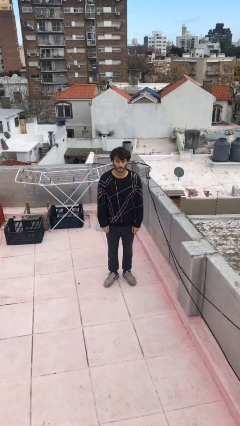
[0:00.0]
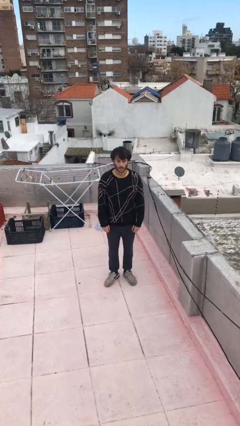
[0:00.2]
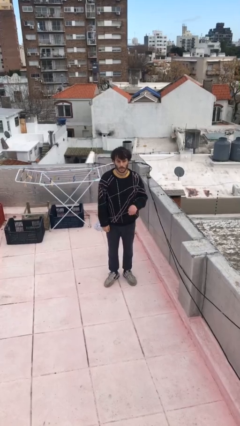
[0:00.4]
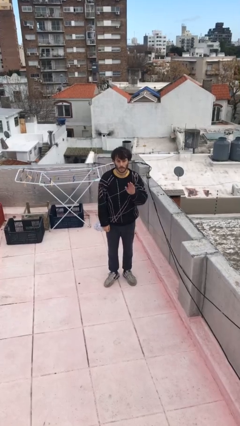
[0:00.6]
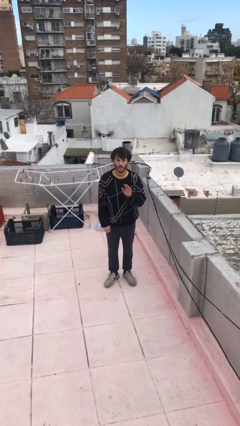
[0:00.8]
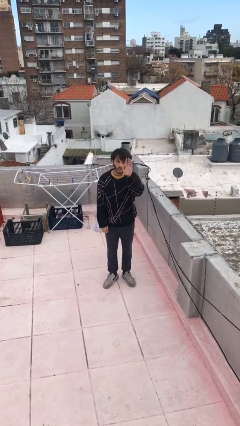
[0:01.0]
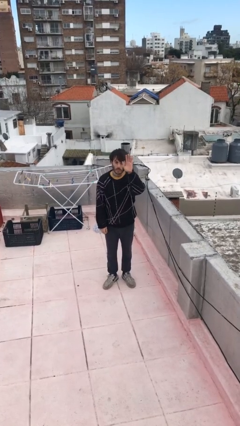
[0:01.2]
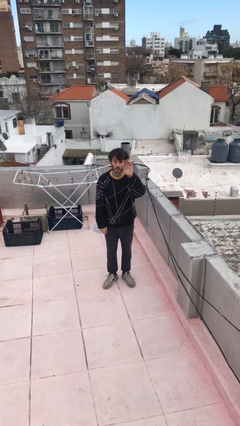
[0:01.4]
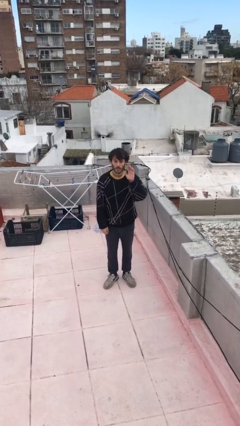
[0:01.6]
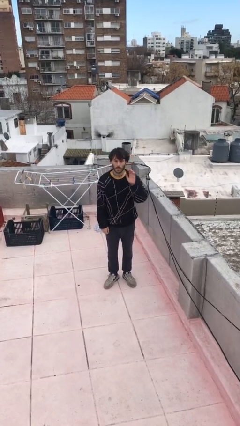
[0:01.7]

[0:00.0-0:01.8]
person gestures swipe up

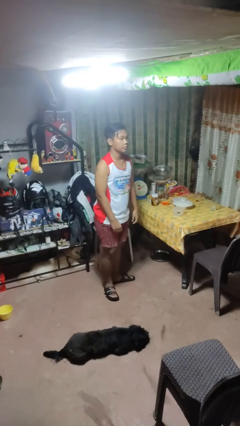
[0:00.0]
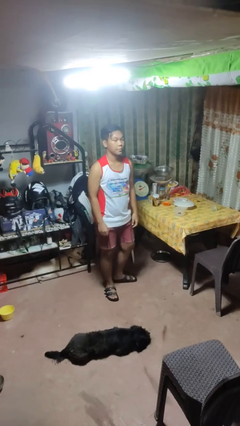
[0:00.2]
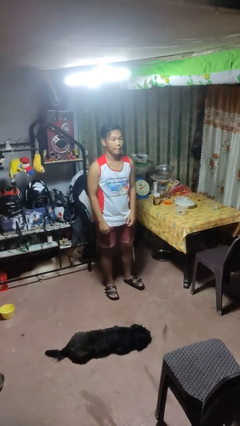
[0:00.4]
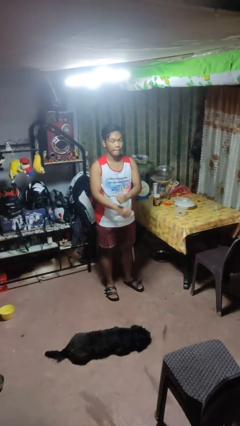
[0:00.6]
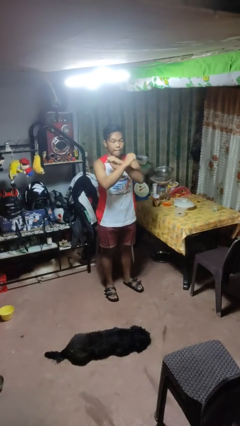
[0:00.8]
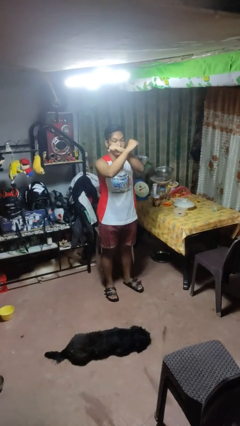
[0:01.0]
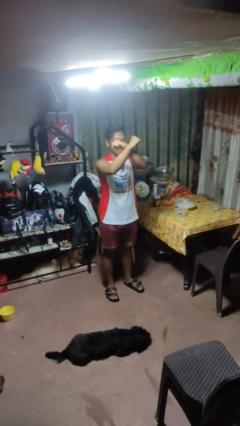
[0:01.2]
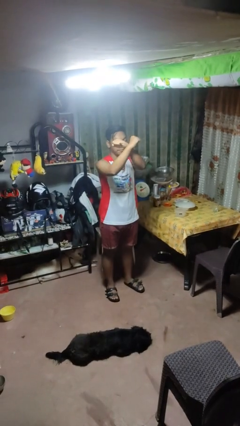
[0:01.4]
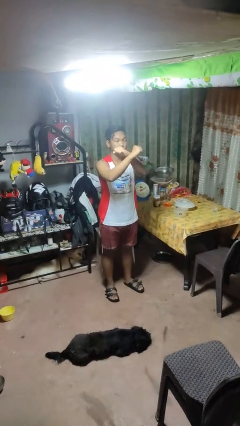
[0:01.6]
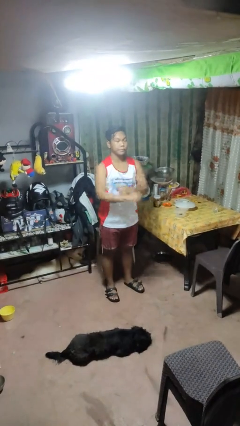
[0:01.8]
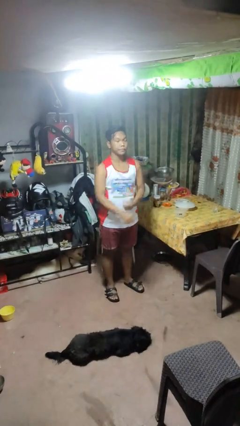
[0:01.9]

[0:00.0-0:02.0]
person gestures arms x

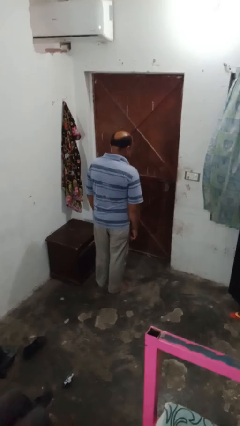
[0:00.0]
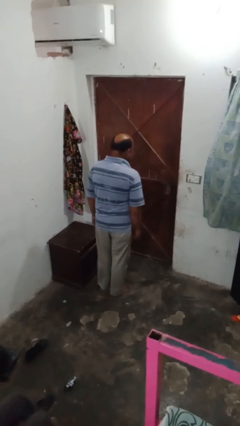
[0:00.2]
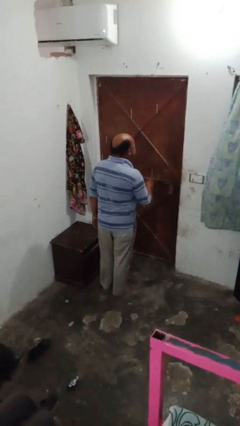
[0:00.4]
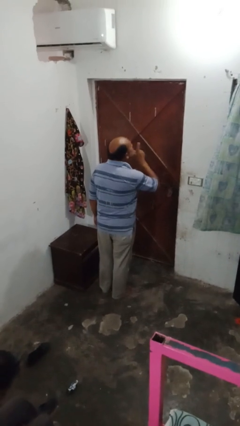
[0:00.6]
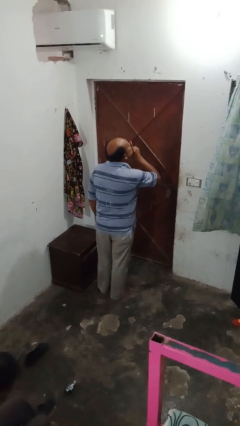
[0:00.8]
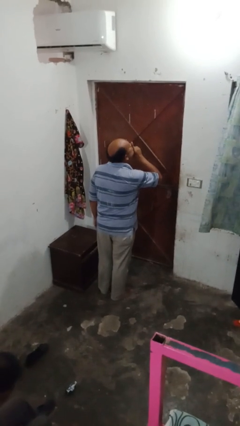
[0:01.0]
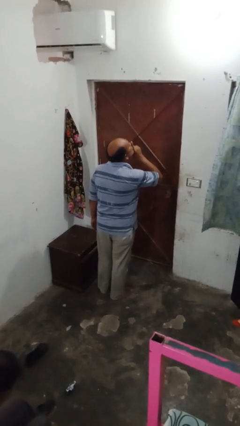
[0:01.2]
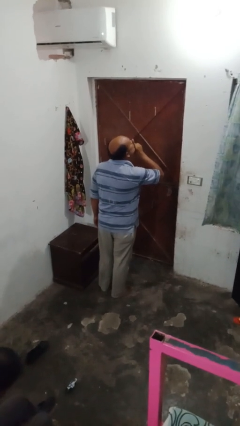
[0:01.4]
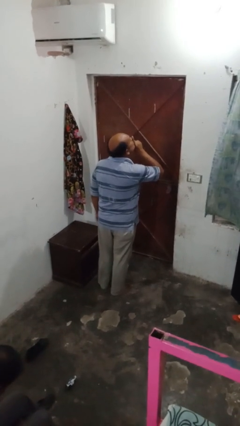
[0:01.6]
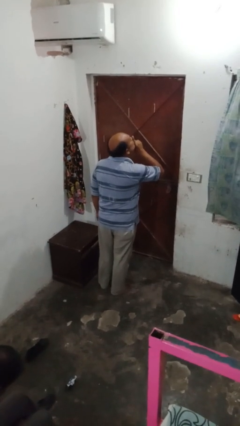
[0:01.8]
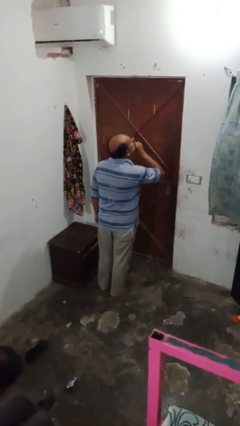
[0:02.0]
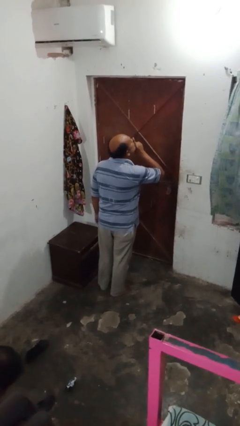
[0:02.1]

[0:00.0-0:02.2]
person gestures be quiet

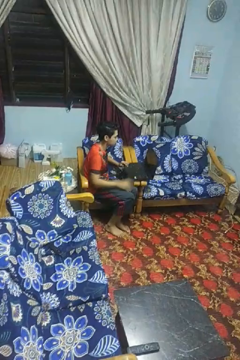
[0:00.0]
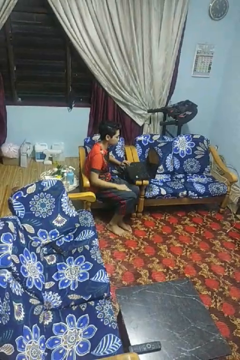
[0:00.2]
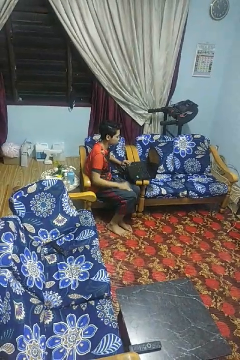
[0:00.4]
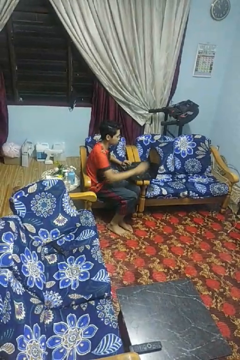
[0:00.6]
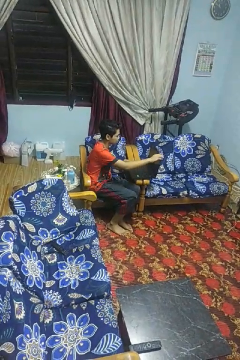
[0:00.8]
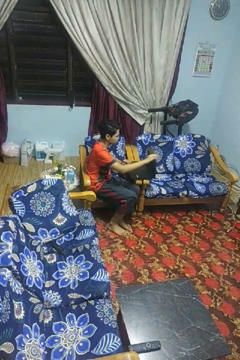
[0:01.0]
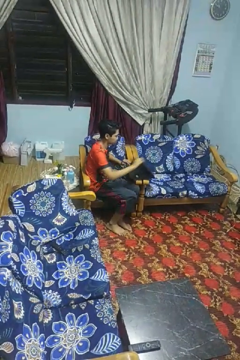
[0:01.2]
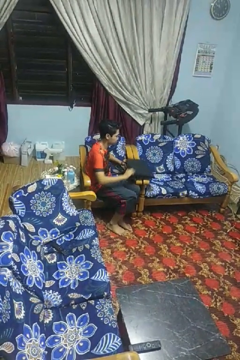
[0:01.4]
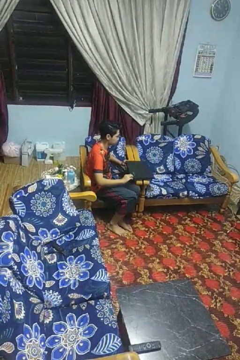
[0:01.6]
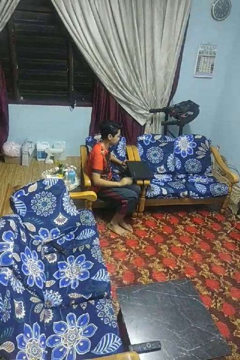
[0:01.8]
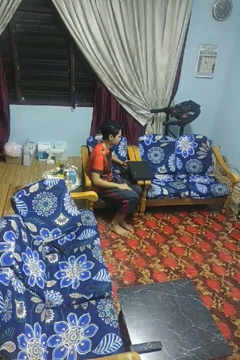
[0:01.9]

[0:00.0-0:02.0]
person closes laptop

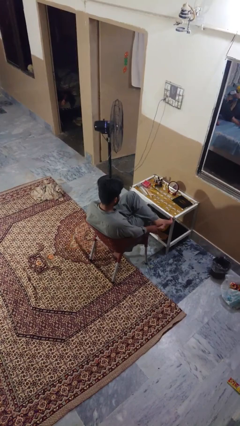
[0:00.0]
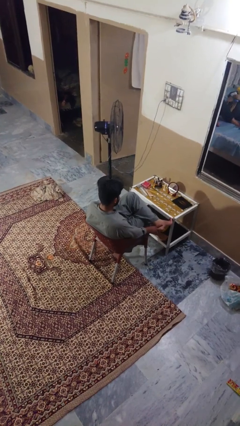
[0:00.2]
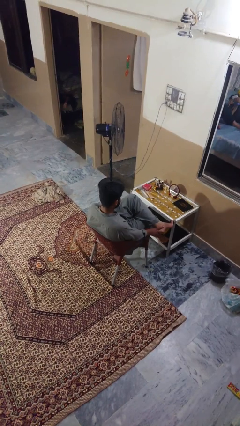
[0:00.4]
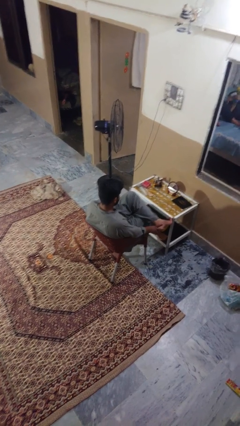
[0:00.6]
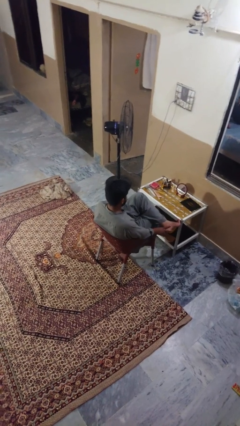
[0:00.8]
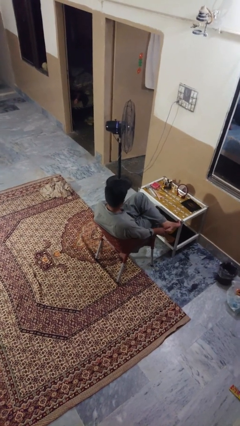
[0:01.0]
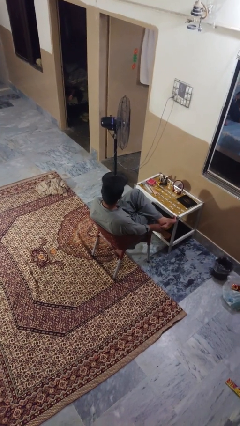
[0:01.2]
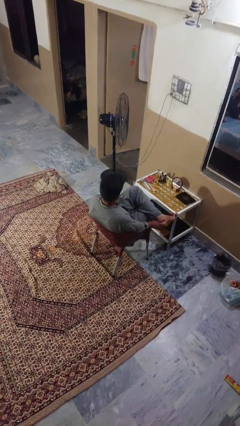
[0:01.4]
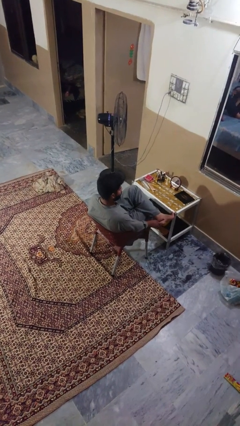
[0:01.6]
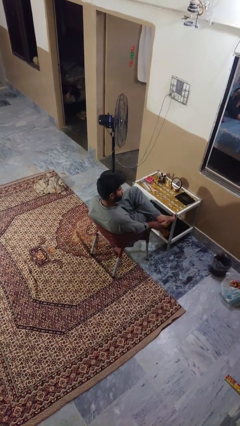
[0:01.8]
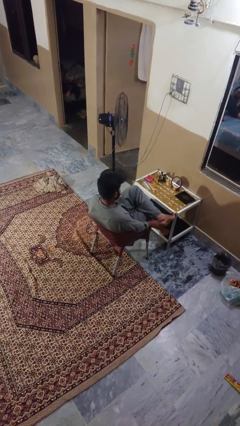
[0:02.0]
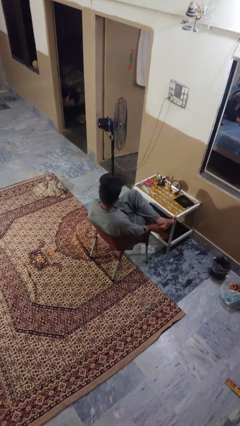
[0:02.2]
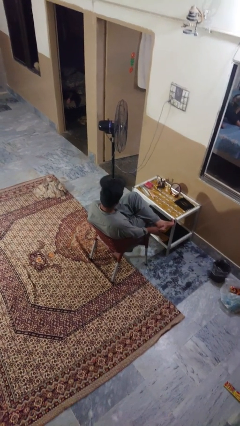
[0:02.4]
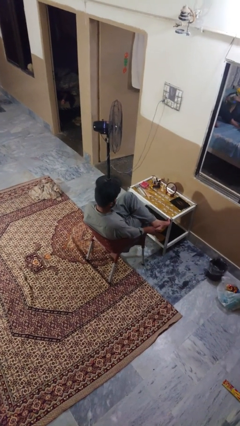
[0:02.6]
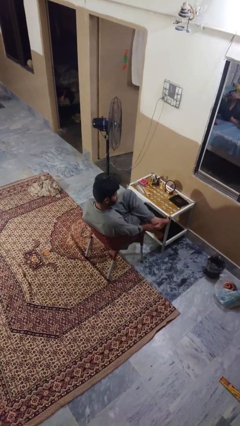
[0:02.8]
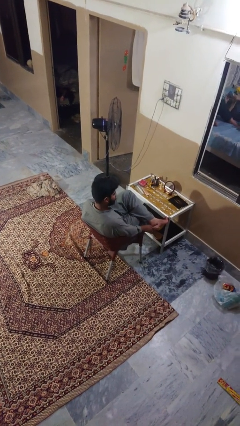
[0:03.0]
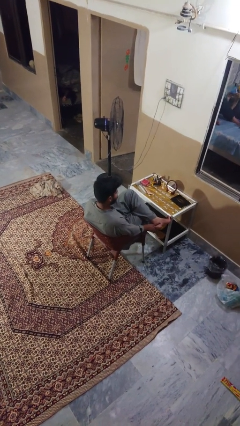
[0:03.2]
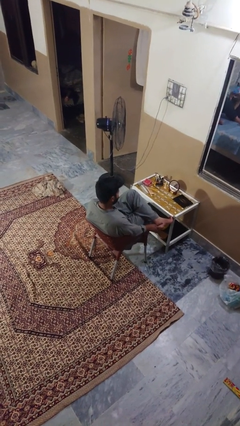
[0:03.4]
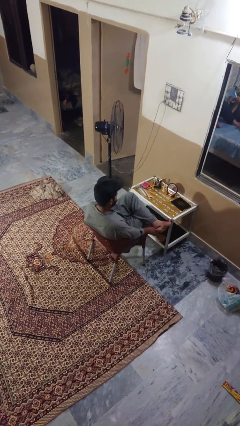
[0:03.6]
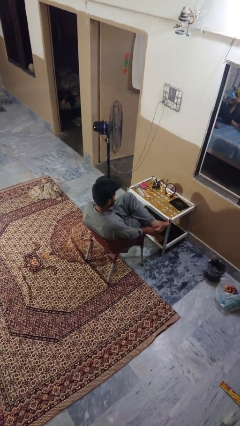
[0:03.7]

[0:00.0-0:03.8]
person shakes head

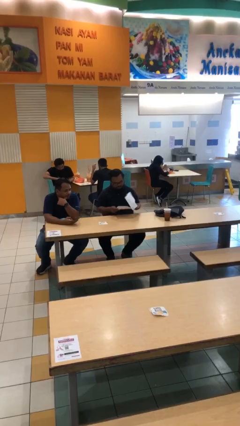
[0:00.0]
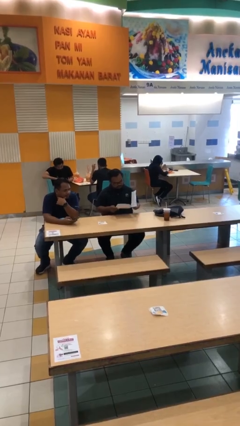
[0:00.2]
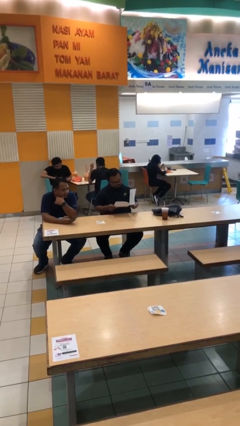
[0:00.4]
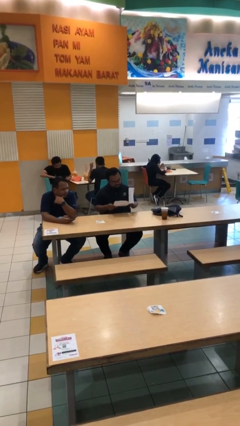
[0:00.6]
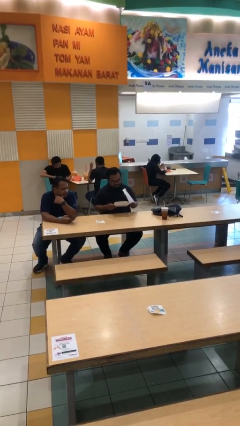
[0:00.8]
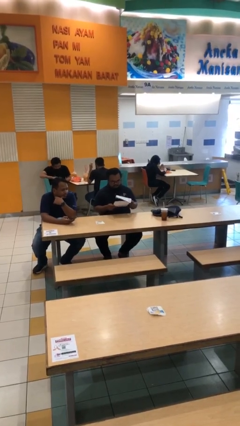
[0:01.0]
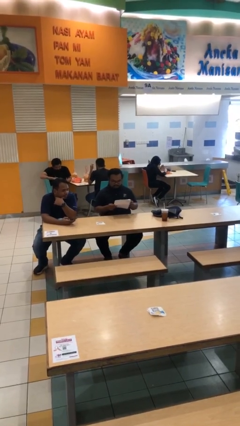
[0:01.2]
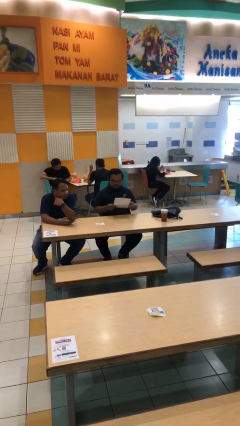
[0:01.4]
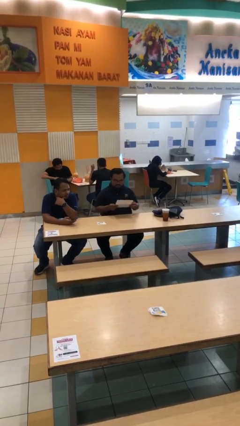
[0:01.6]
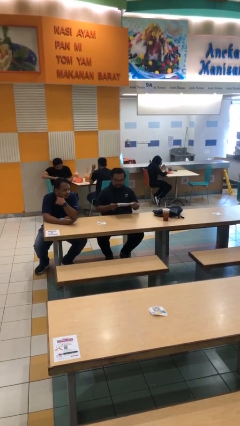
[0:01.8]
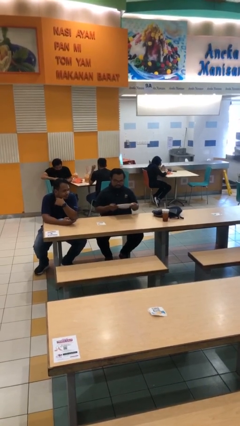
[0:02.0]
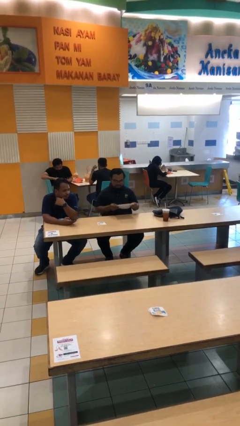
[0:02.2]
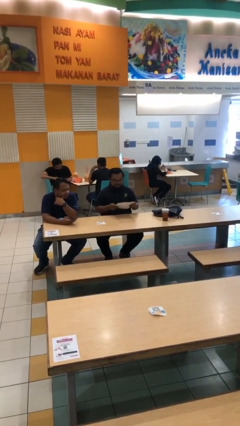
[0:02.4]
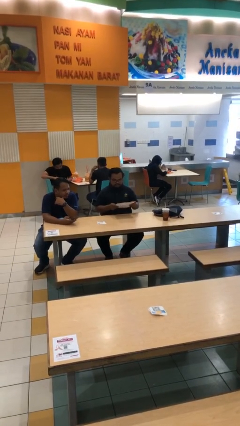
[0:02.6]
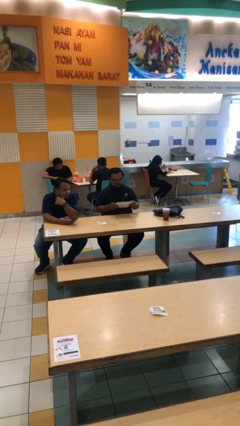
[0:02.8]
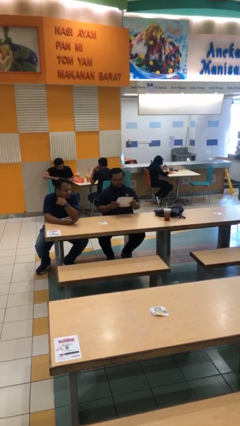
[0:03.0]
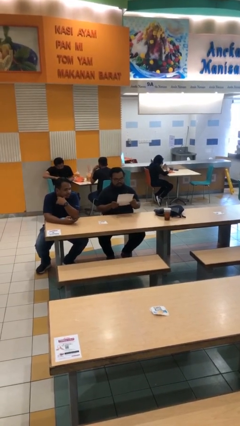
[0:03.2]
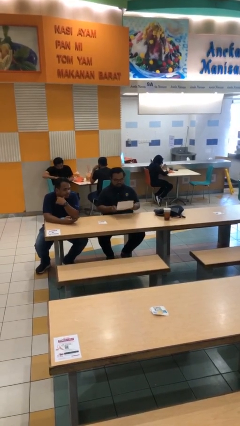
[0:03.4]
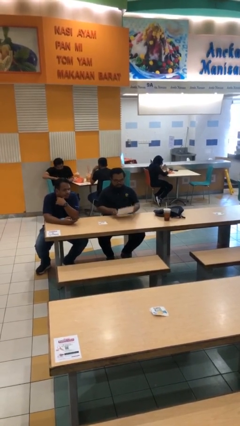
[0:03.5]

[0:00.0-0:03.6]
person reads document

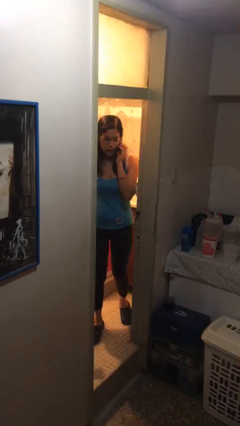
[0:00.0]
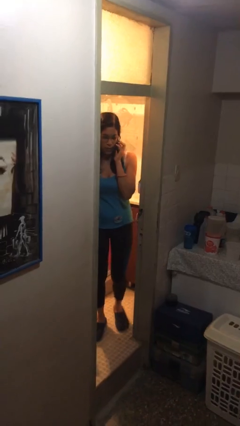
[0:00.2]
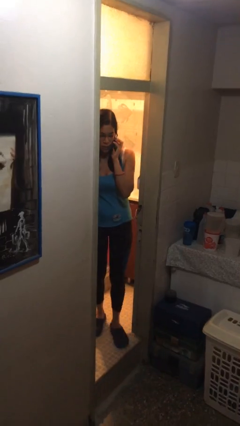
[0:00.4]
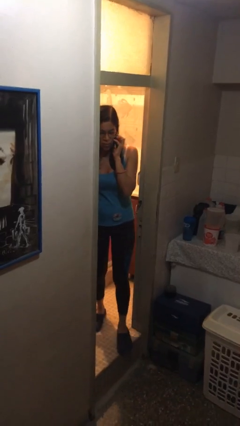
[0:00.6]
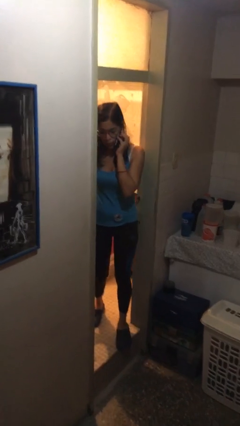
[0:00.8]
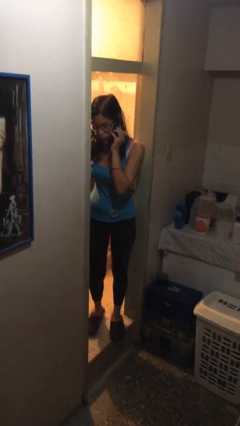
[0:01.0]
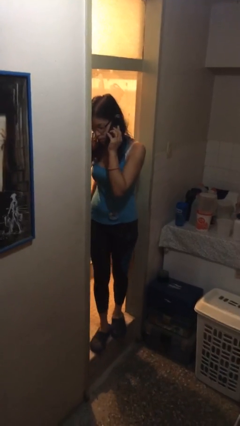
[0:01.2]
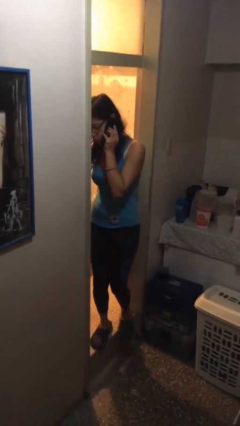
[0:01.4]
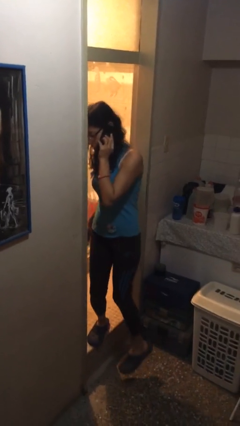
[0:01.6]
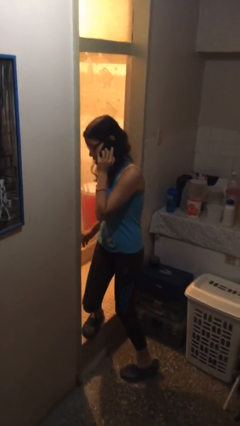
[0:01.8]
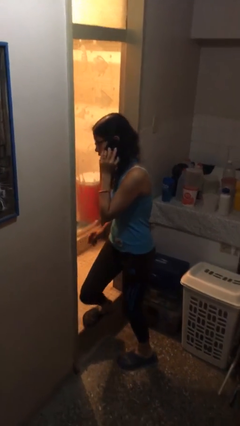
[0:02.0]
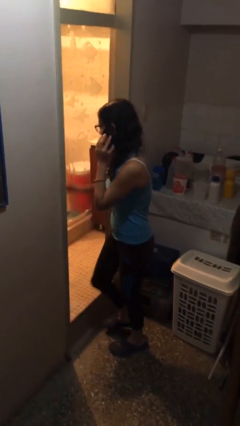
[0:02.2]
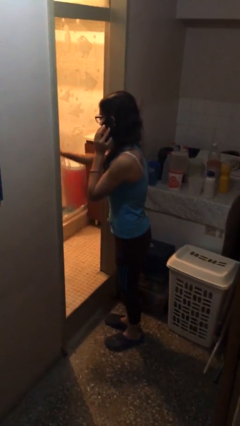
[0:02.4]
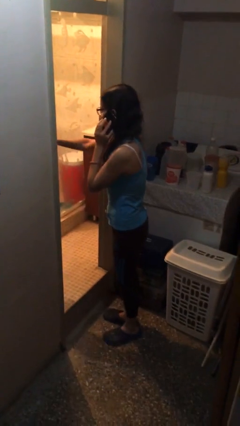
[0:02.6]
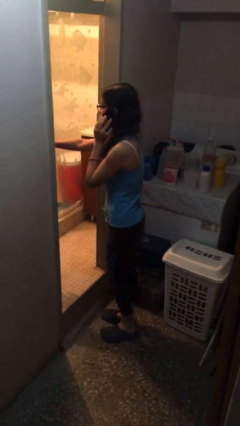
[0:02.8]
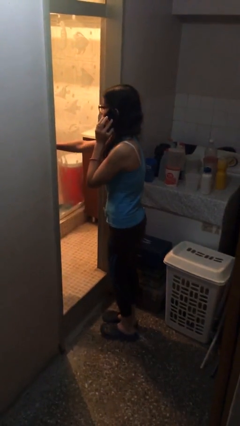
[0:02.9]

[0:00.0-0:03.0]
person enters scene through structure
